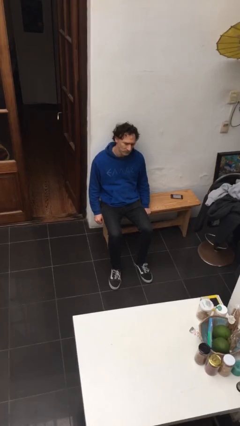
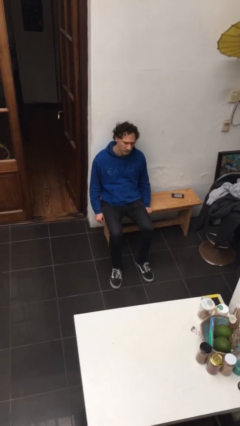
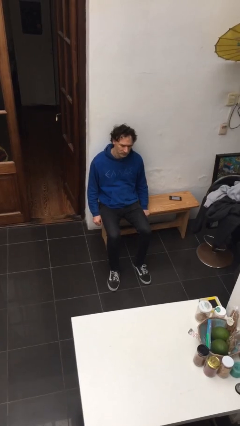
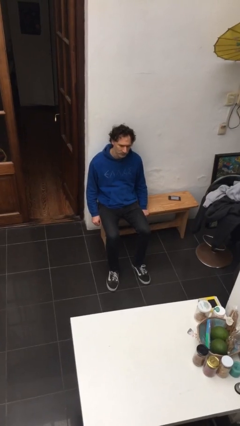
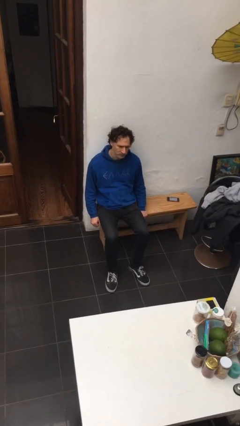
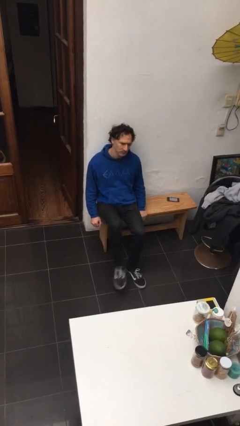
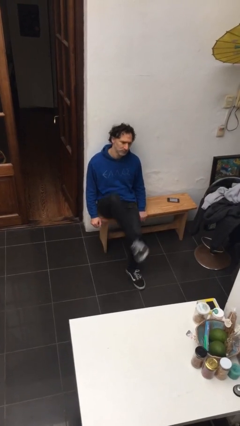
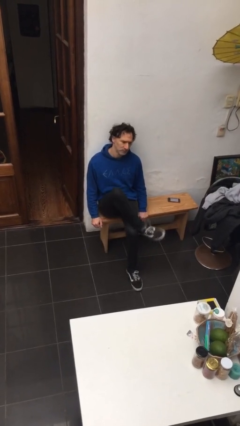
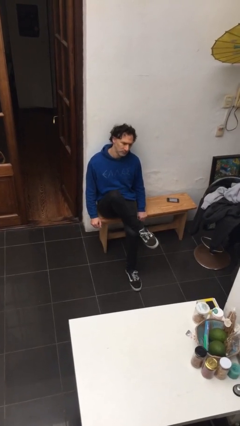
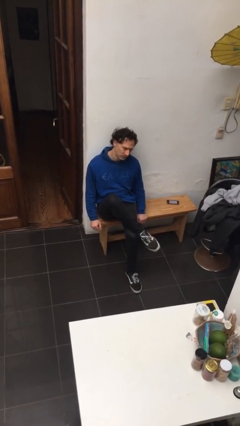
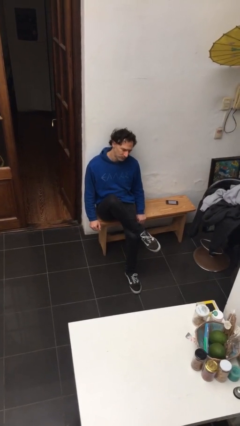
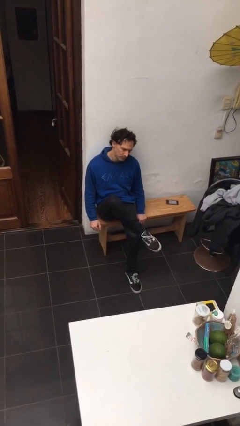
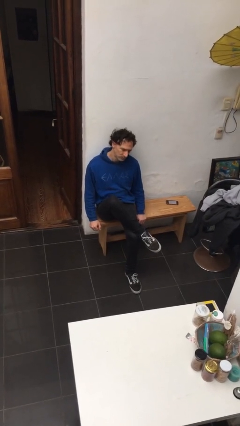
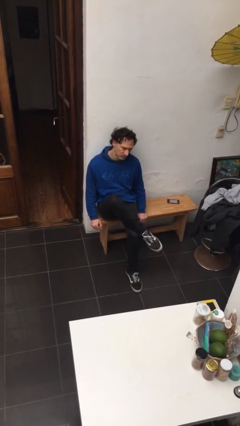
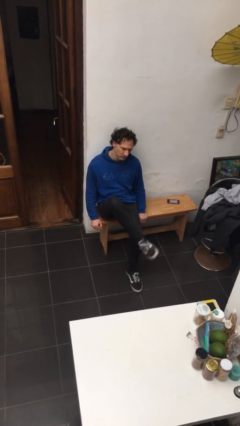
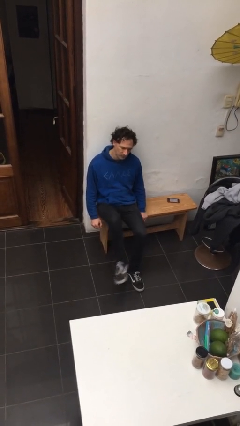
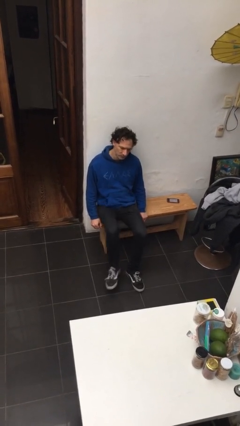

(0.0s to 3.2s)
person crosses legs

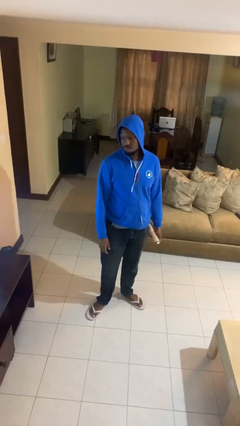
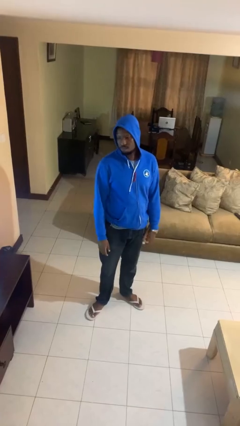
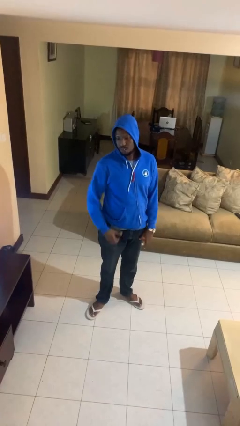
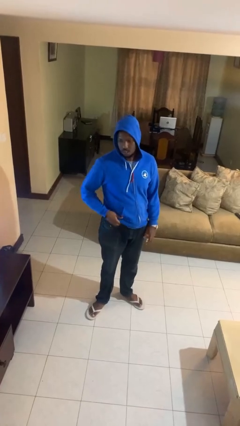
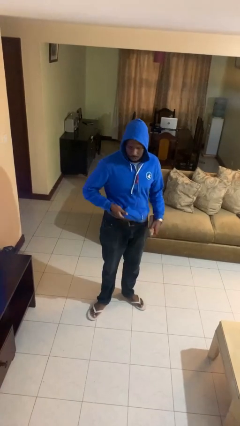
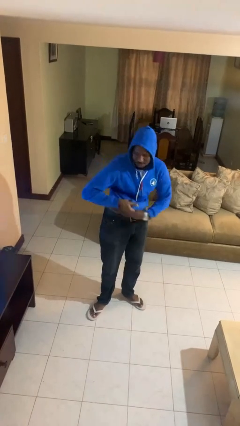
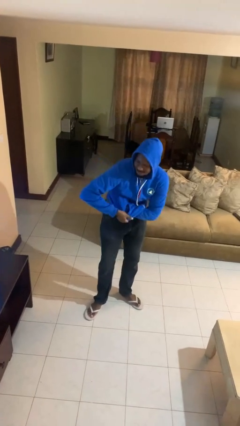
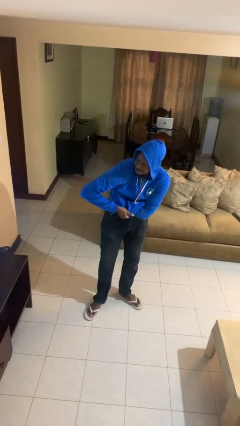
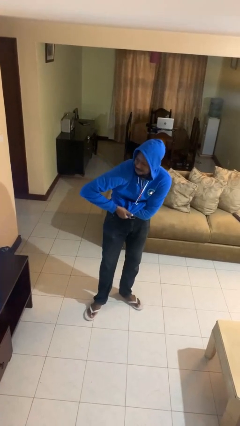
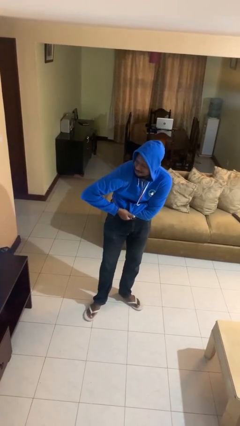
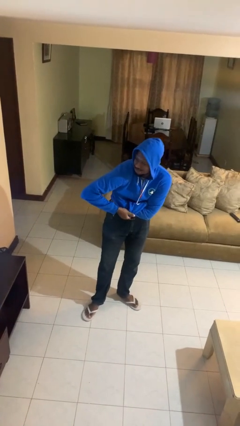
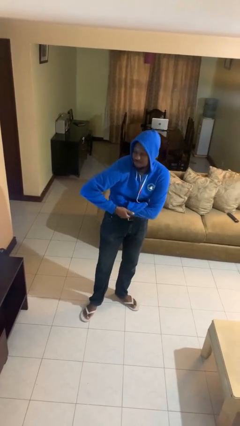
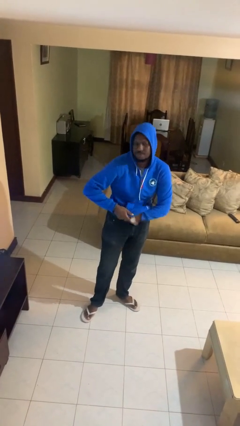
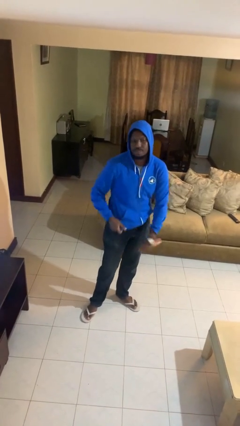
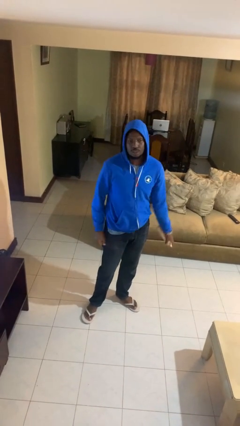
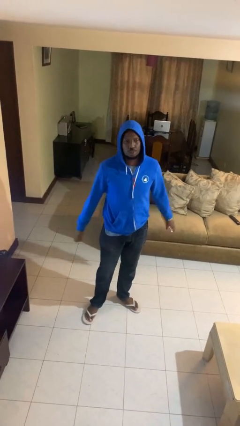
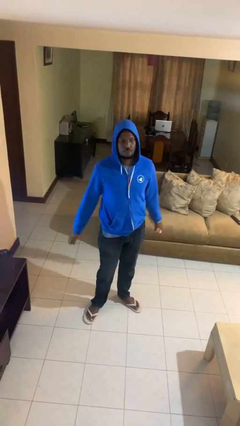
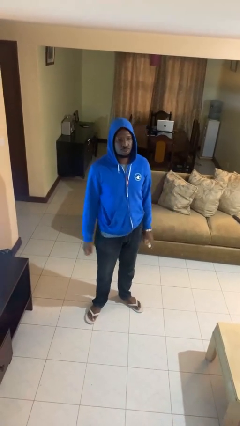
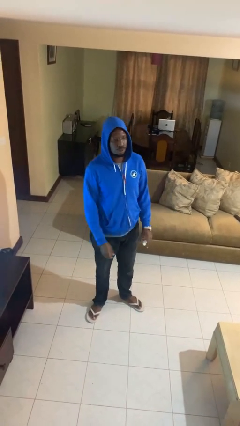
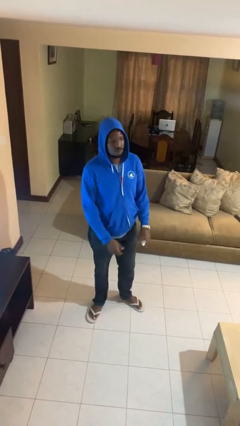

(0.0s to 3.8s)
person applies deodorant

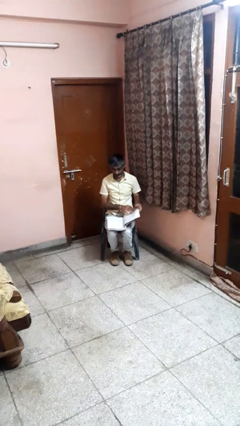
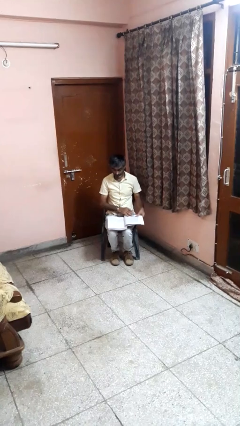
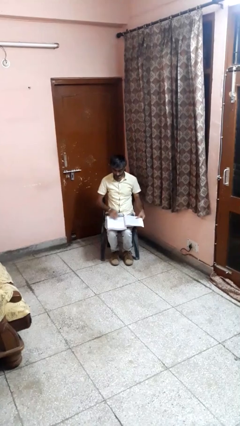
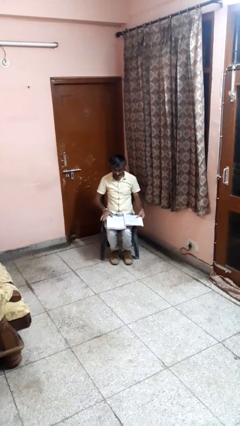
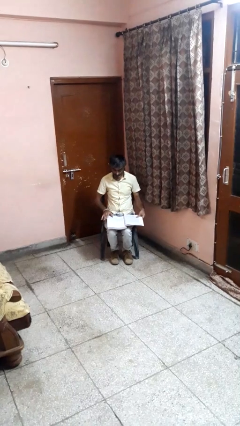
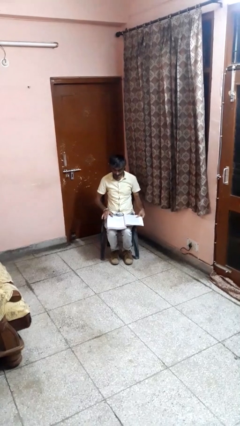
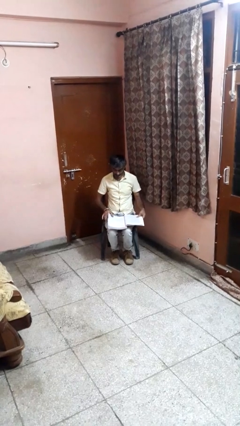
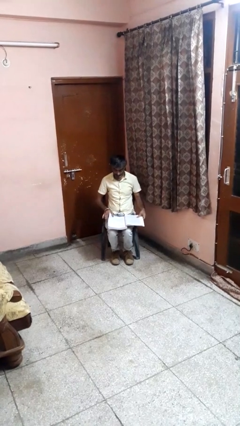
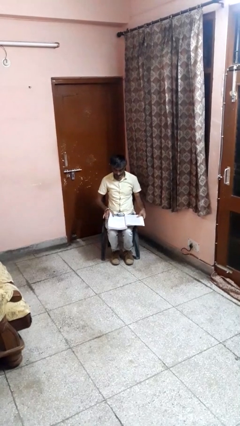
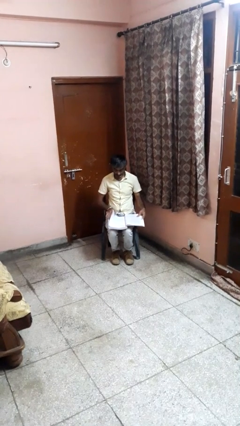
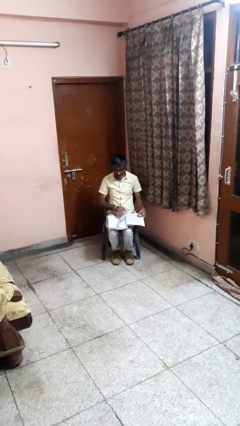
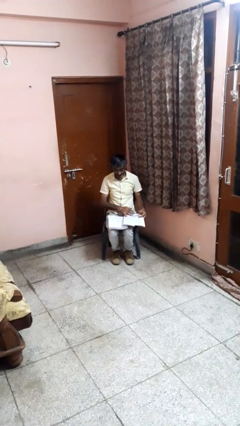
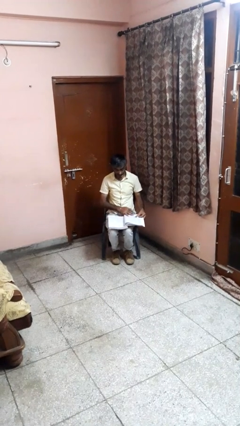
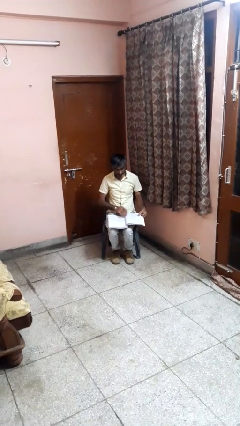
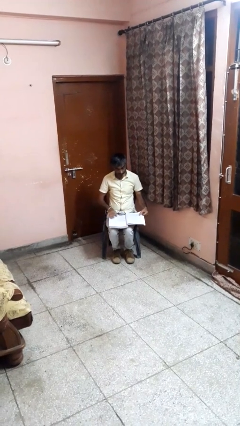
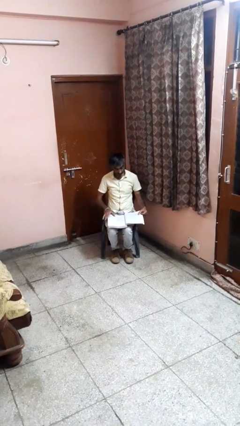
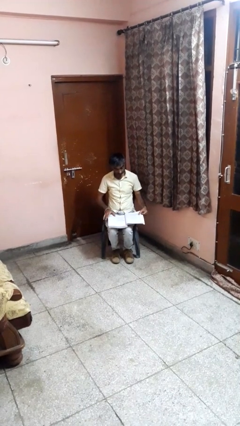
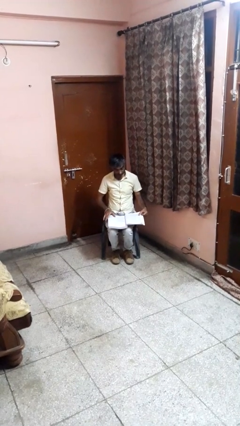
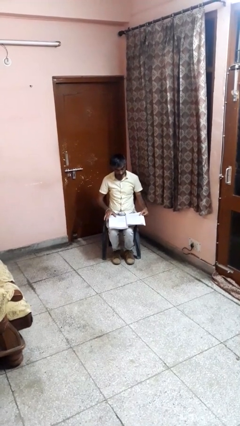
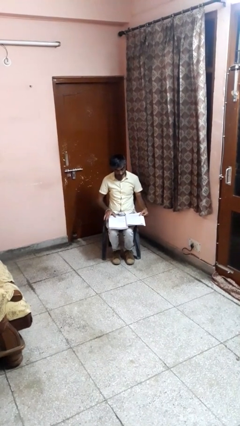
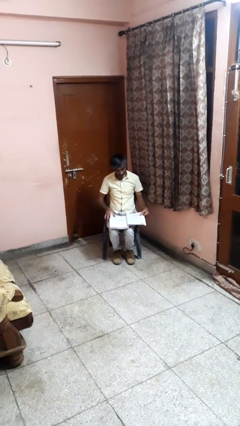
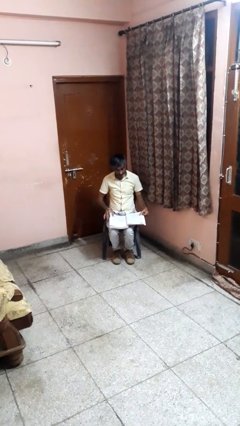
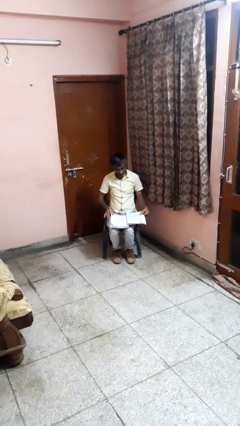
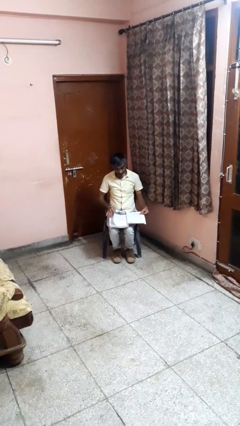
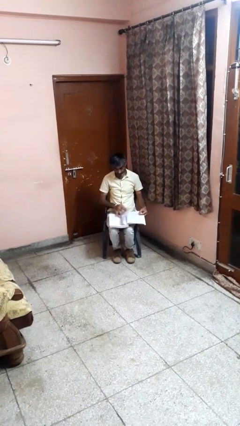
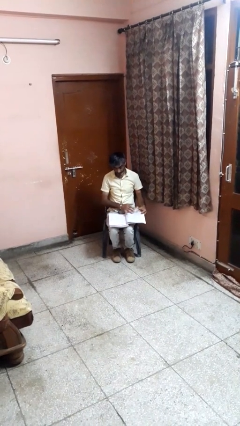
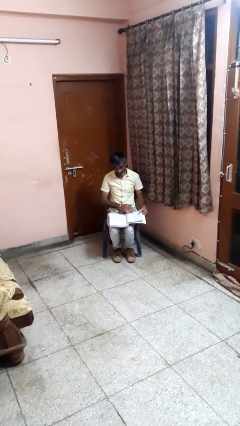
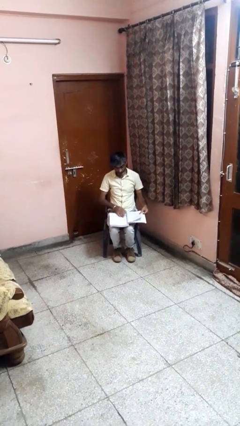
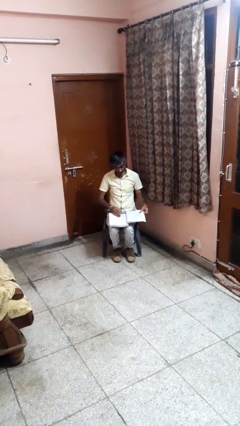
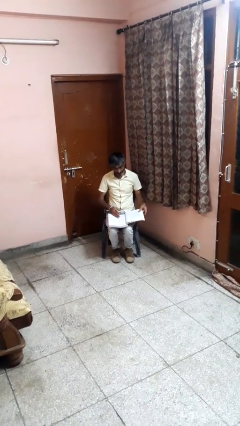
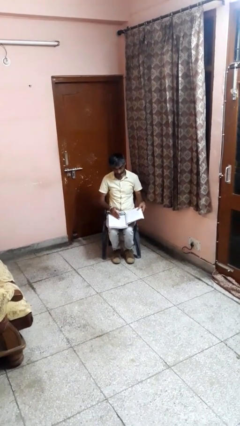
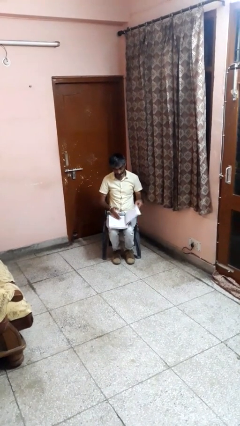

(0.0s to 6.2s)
person reads book

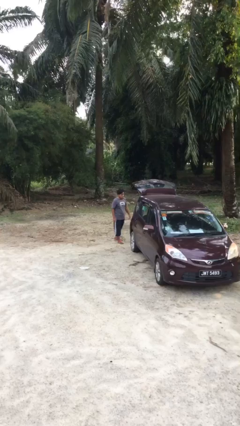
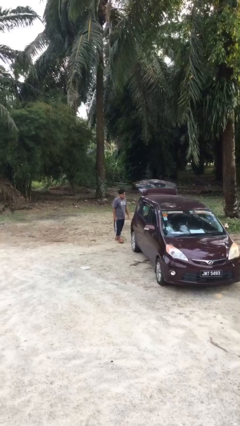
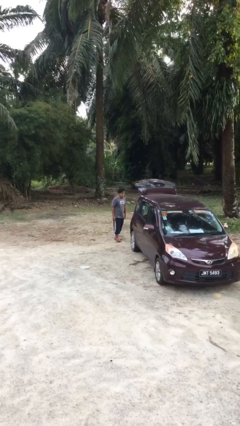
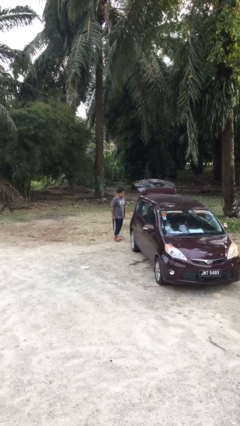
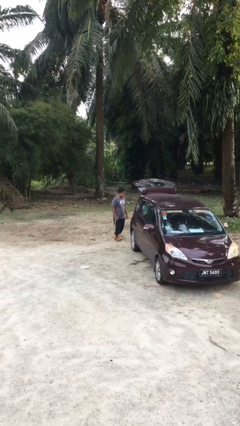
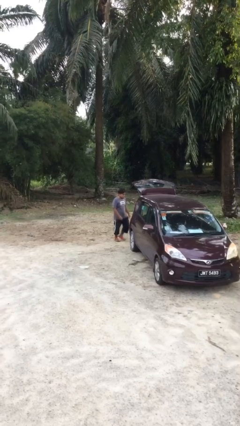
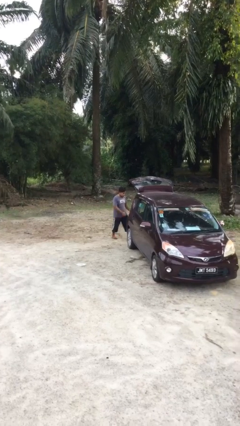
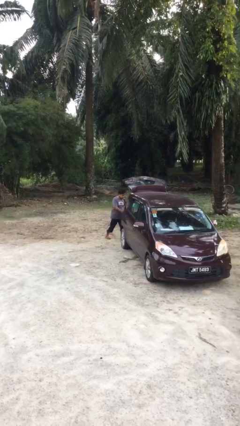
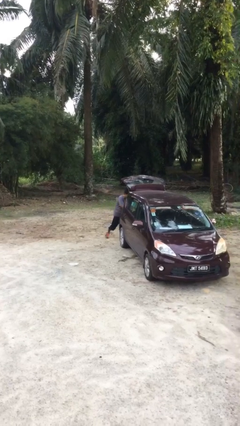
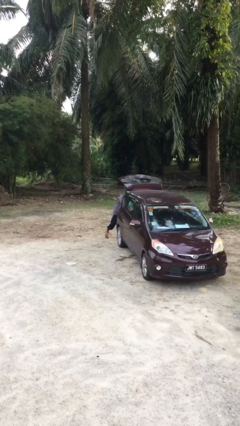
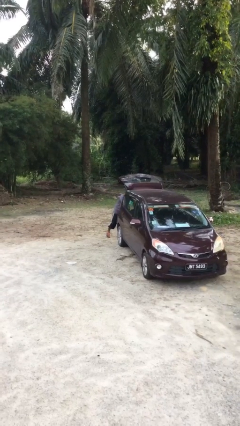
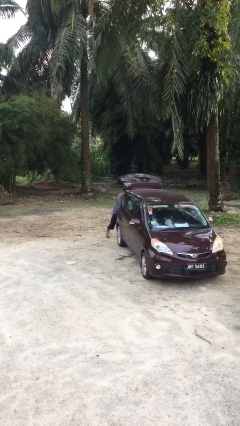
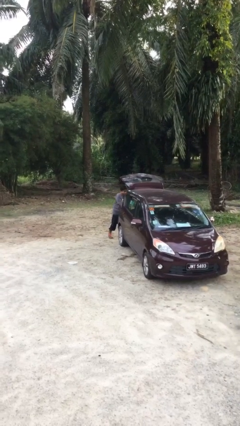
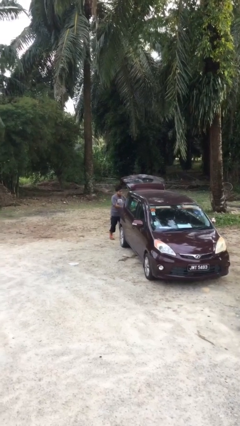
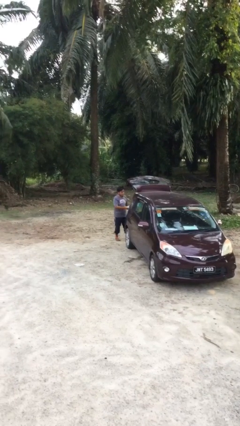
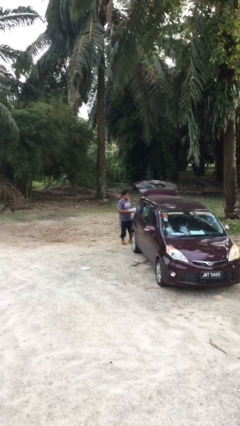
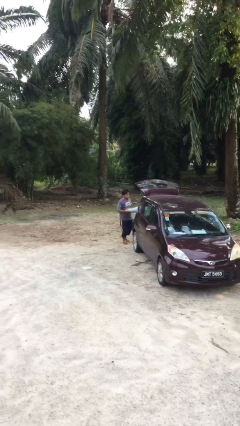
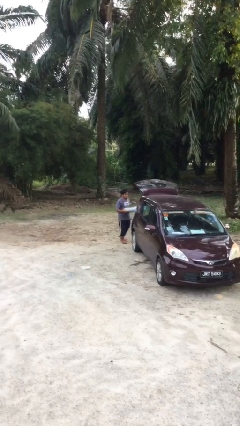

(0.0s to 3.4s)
person unloads car

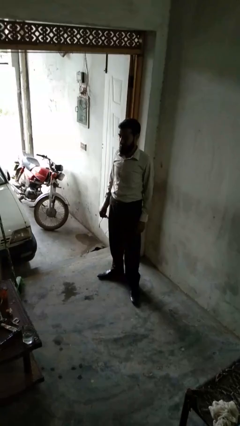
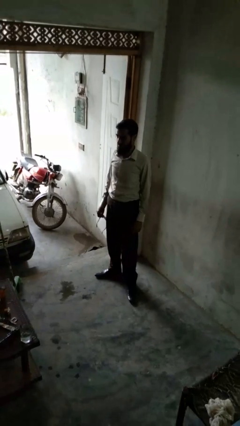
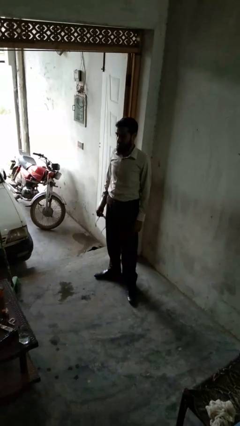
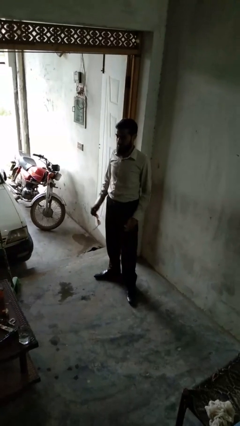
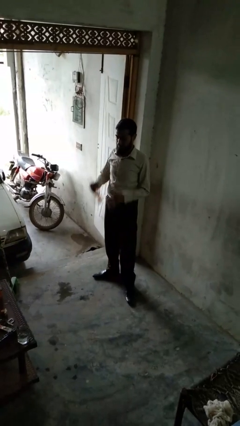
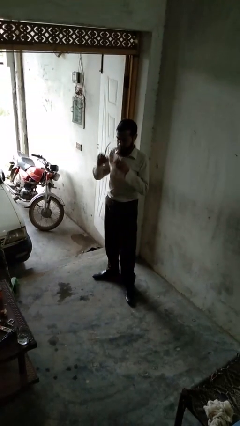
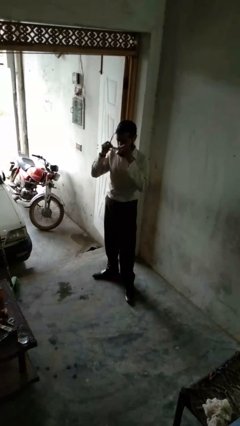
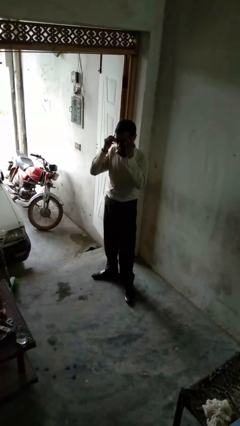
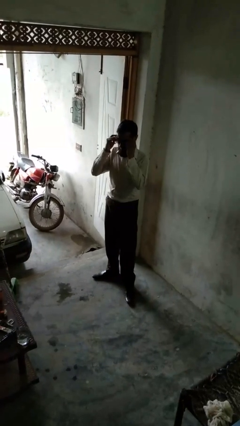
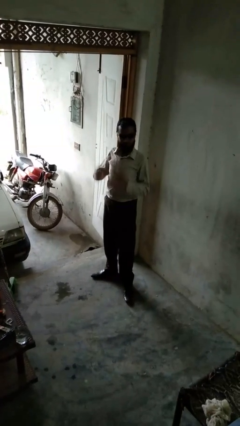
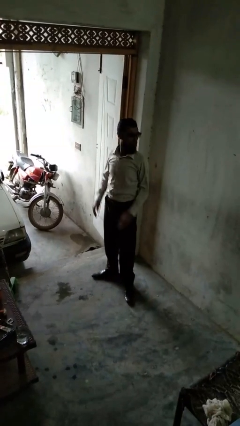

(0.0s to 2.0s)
person puts on sunglasses
